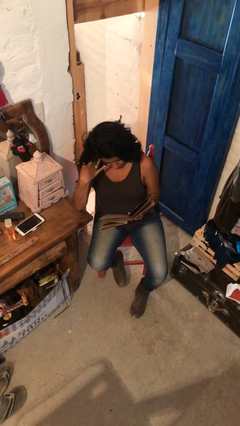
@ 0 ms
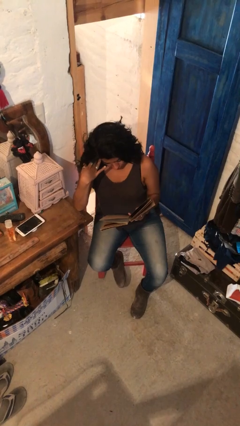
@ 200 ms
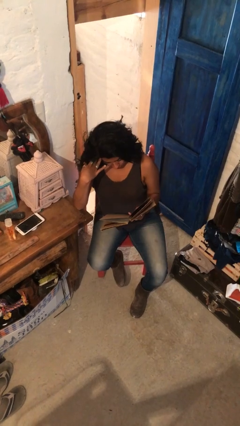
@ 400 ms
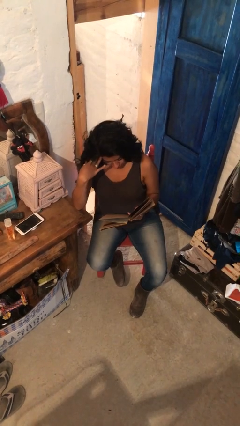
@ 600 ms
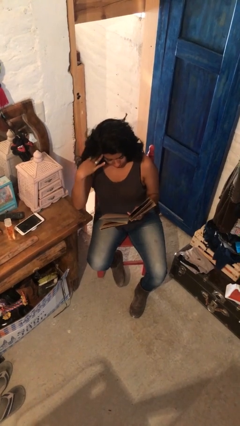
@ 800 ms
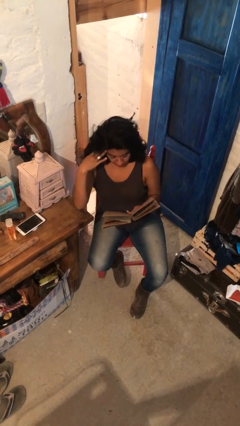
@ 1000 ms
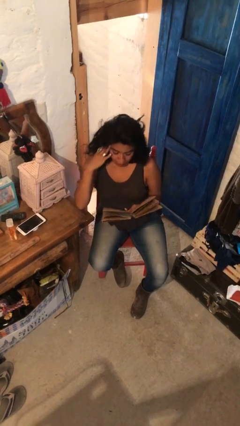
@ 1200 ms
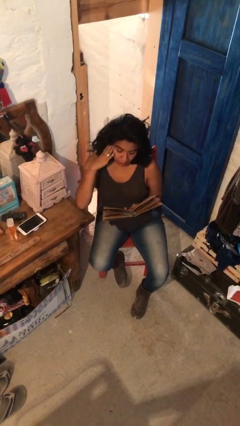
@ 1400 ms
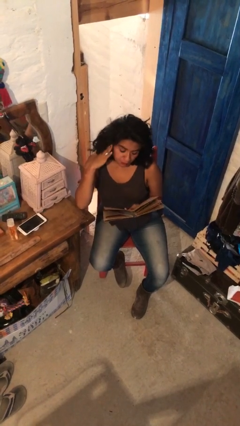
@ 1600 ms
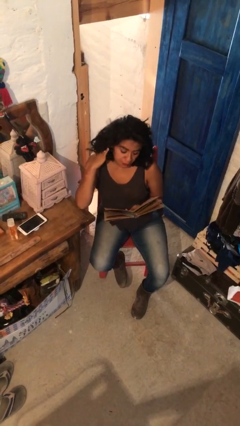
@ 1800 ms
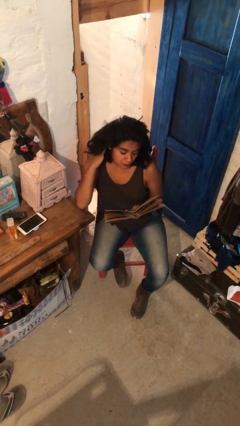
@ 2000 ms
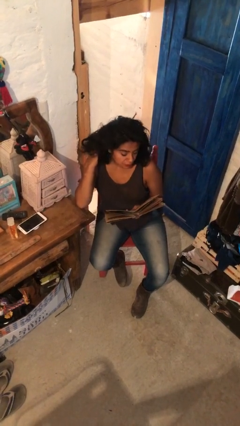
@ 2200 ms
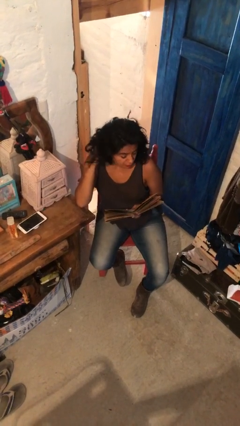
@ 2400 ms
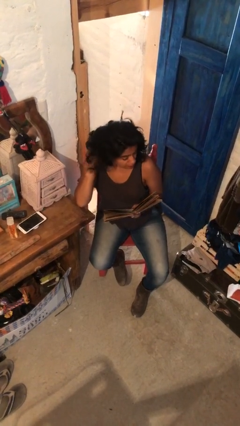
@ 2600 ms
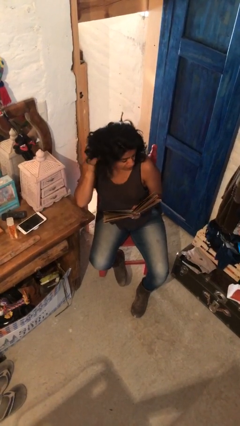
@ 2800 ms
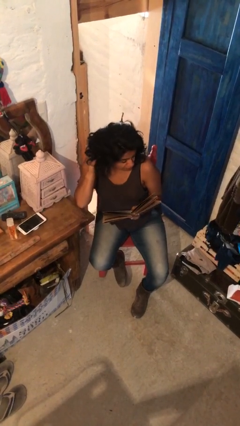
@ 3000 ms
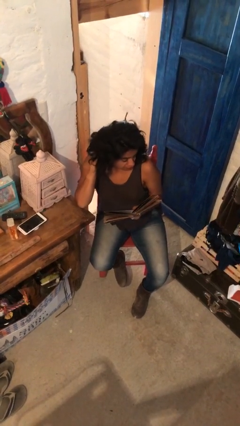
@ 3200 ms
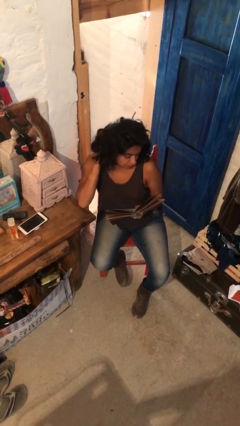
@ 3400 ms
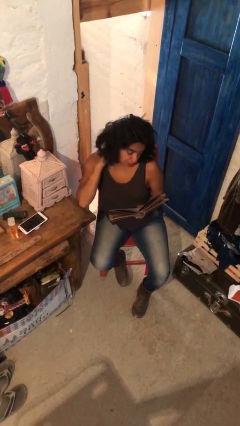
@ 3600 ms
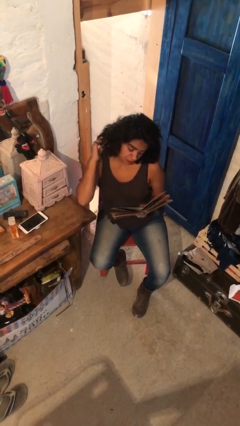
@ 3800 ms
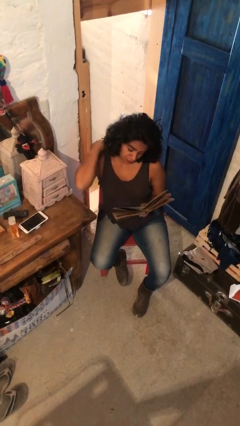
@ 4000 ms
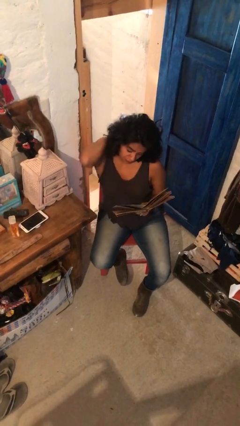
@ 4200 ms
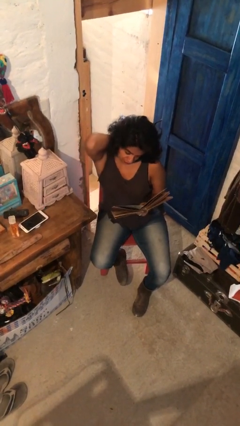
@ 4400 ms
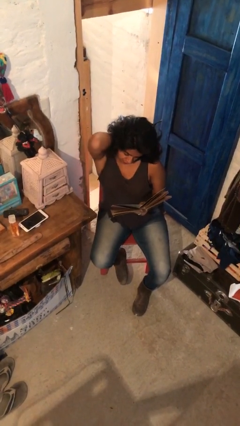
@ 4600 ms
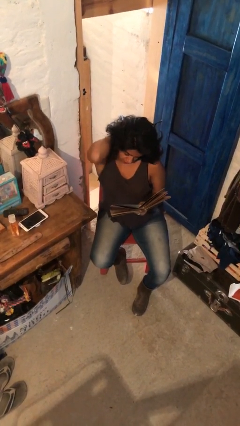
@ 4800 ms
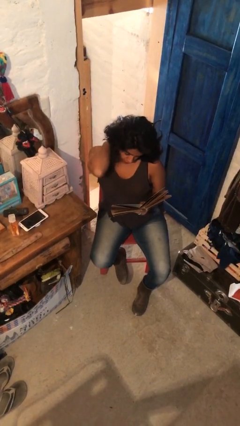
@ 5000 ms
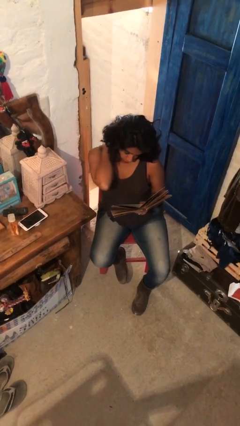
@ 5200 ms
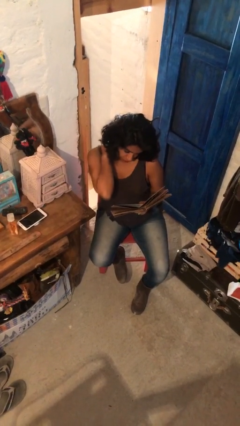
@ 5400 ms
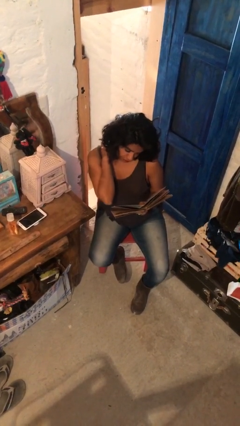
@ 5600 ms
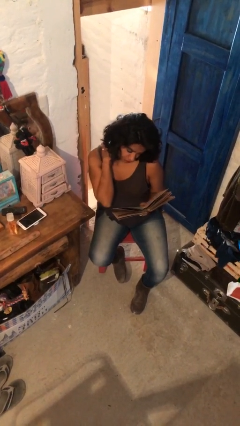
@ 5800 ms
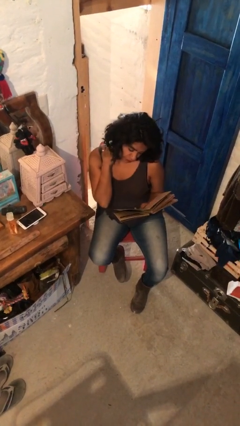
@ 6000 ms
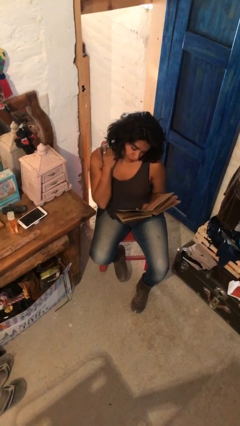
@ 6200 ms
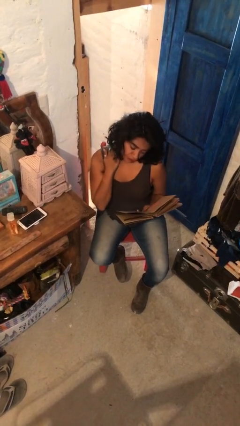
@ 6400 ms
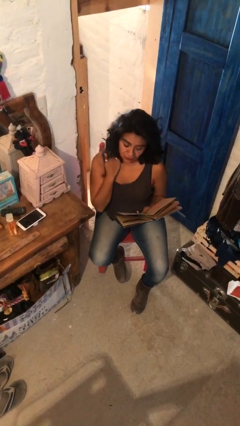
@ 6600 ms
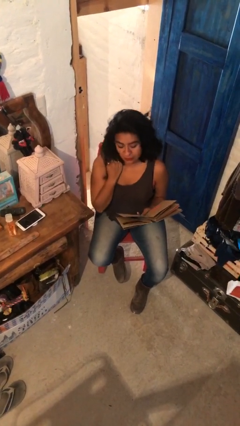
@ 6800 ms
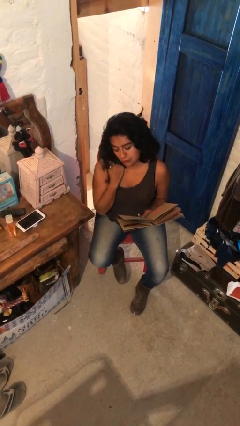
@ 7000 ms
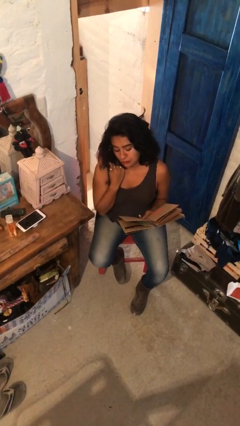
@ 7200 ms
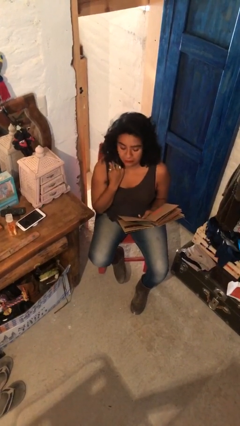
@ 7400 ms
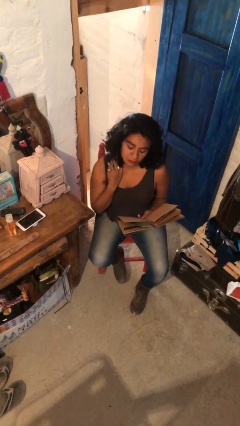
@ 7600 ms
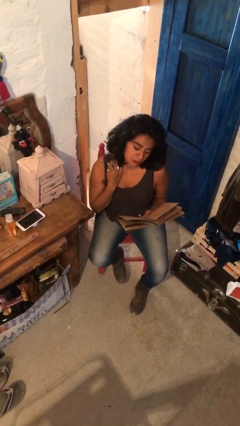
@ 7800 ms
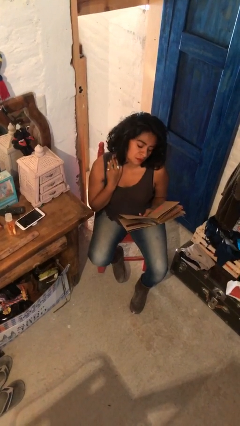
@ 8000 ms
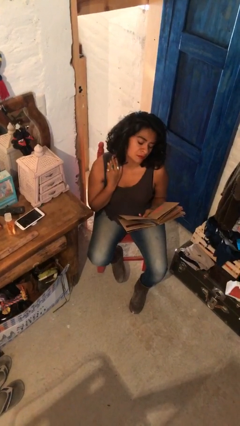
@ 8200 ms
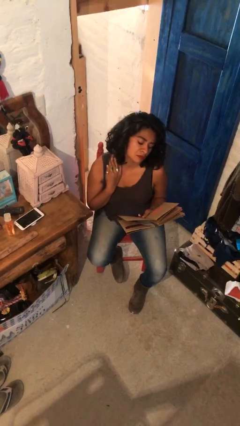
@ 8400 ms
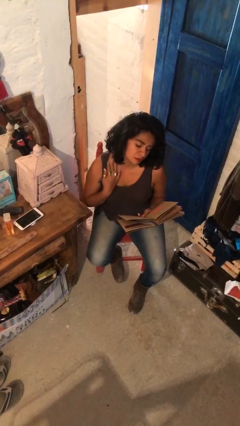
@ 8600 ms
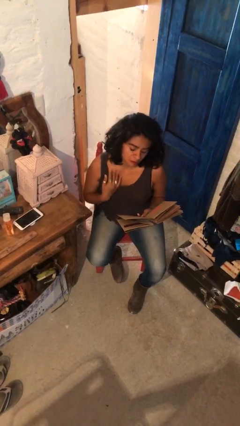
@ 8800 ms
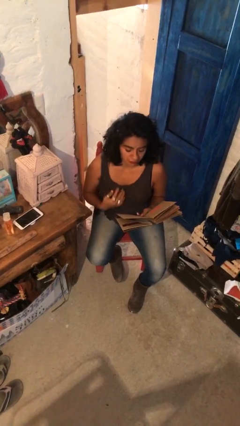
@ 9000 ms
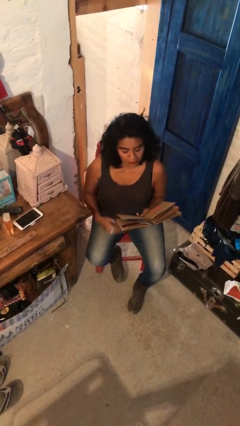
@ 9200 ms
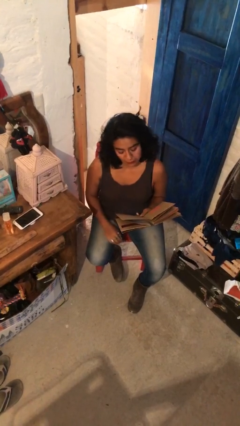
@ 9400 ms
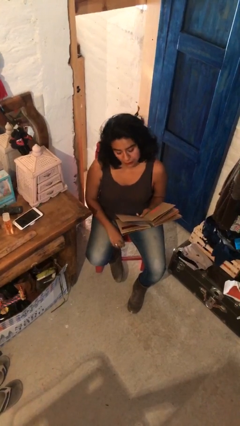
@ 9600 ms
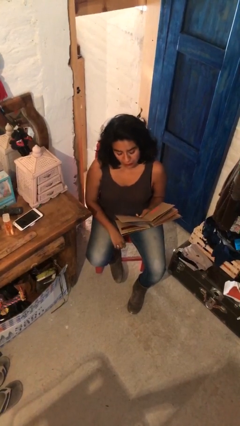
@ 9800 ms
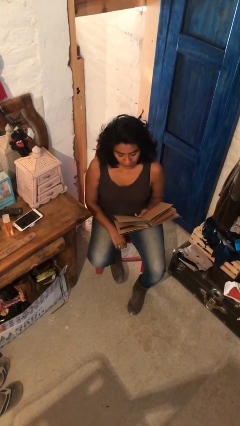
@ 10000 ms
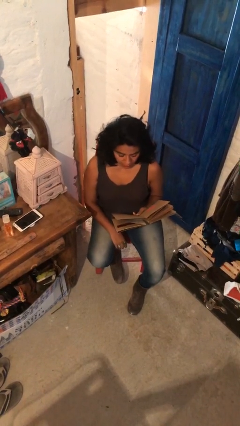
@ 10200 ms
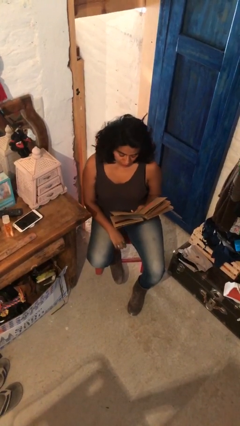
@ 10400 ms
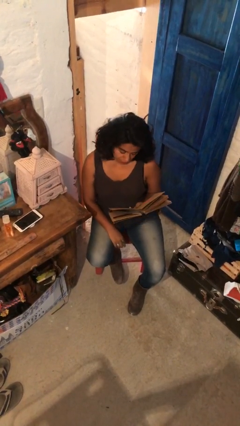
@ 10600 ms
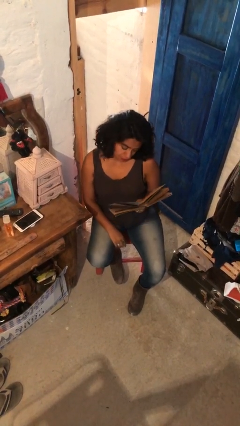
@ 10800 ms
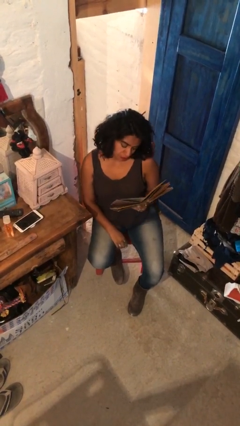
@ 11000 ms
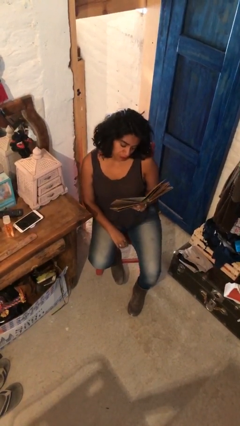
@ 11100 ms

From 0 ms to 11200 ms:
person reads document

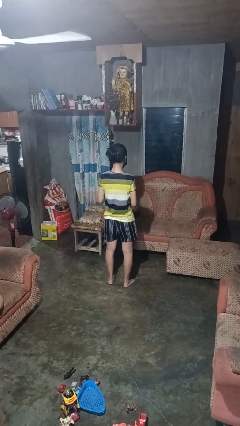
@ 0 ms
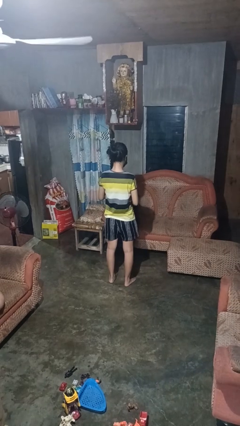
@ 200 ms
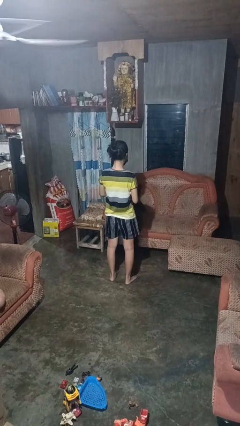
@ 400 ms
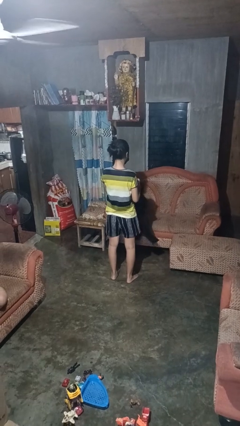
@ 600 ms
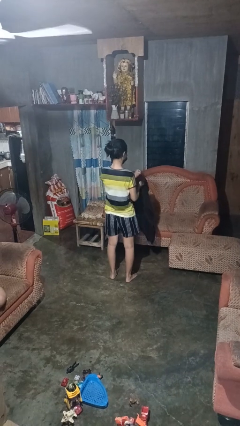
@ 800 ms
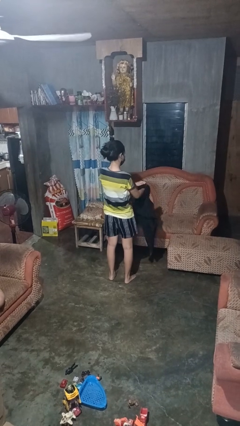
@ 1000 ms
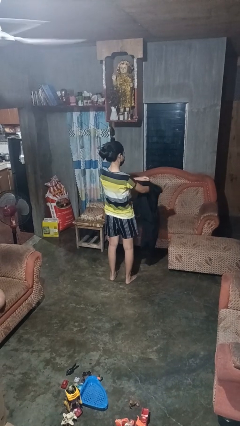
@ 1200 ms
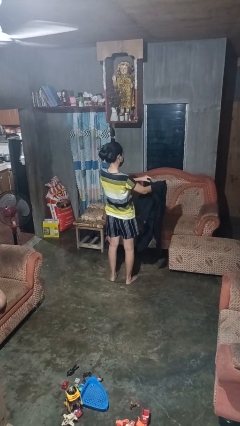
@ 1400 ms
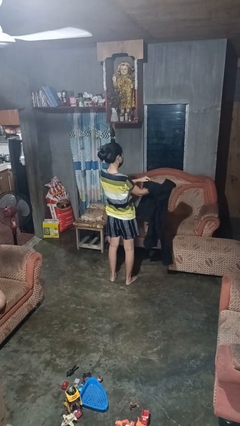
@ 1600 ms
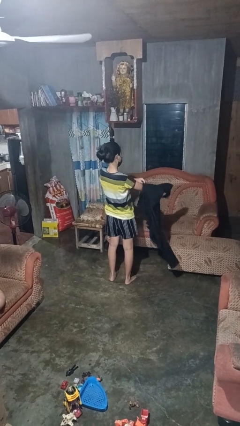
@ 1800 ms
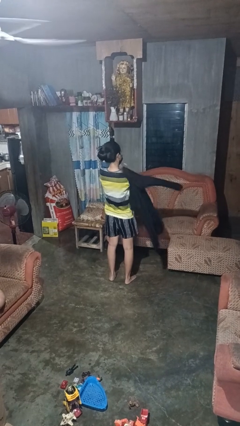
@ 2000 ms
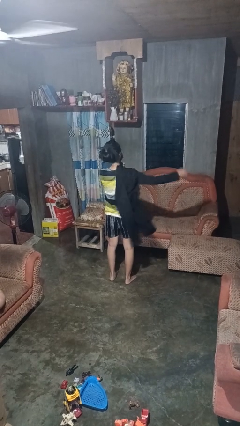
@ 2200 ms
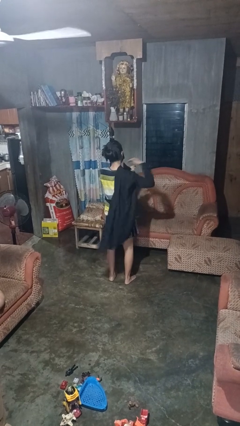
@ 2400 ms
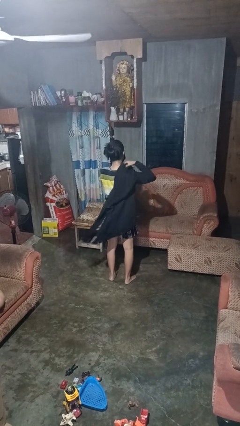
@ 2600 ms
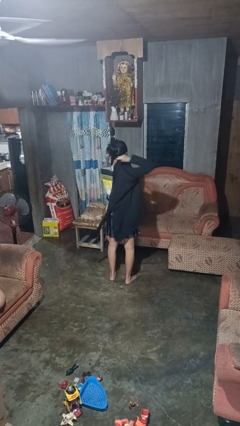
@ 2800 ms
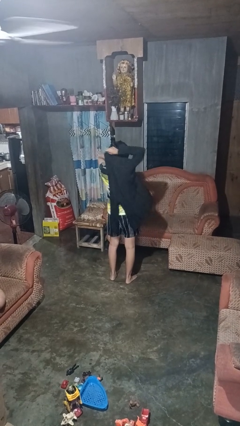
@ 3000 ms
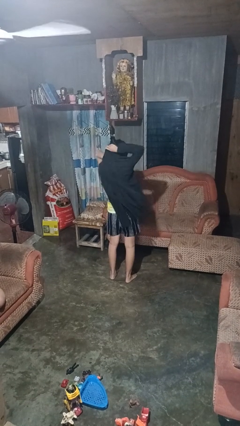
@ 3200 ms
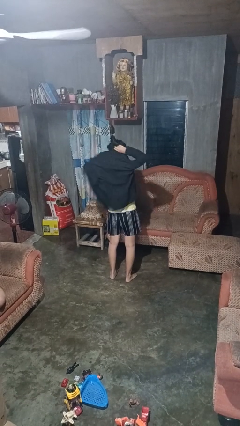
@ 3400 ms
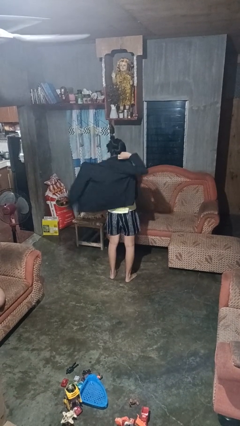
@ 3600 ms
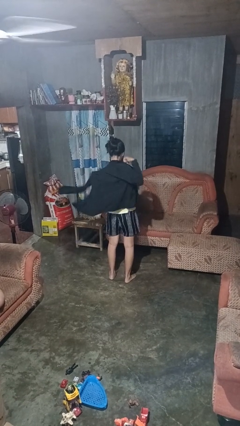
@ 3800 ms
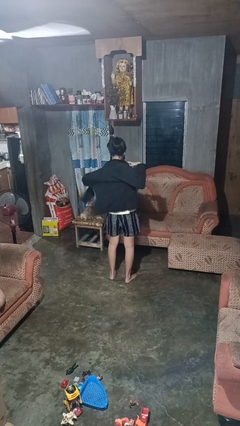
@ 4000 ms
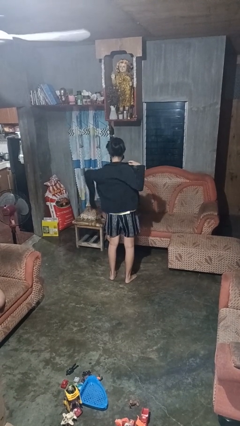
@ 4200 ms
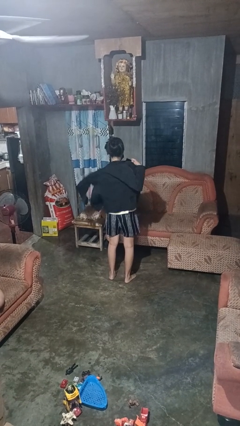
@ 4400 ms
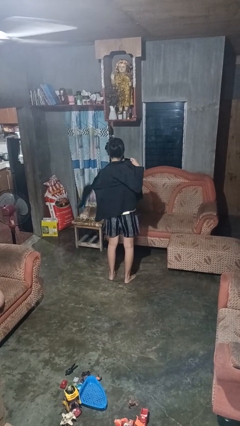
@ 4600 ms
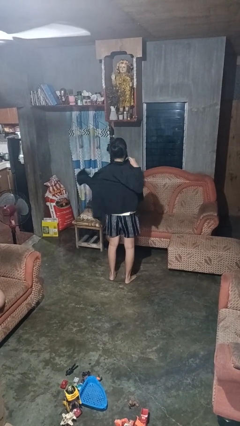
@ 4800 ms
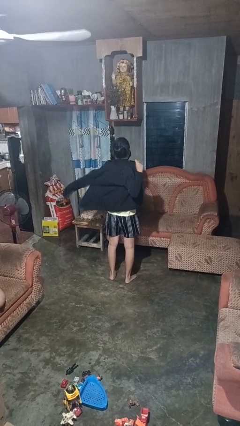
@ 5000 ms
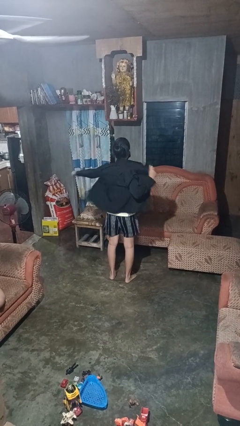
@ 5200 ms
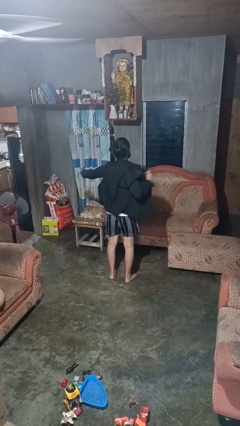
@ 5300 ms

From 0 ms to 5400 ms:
person puts on shirt

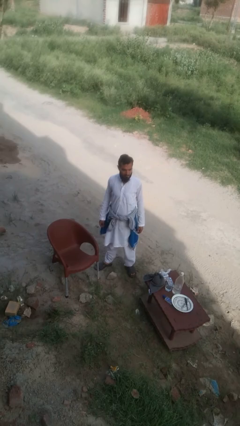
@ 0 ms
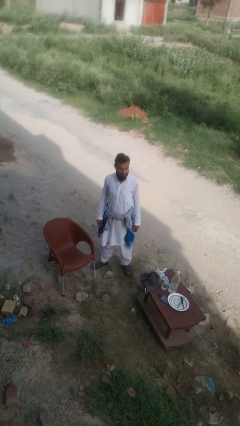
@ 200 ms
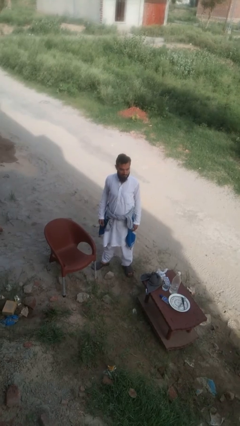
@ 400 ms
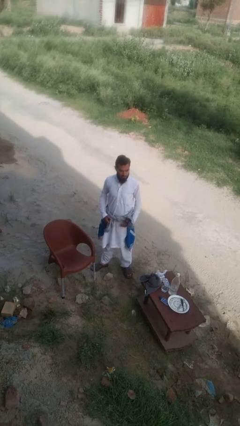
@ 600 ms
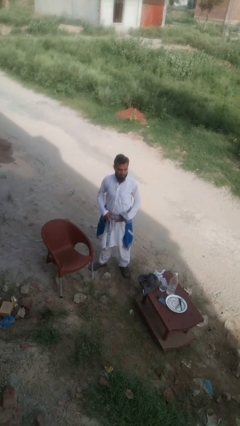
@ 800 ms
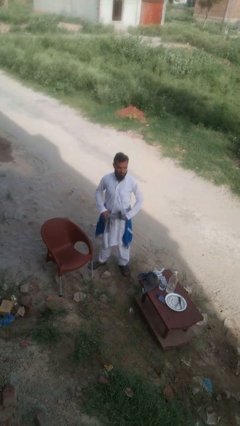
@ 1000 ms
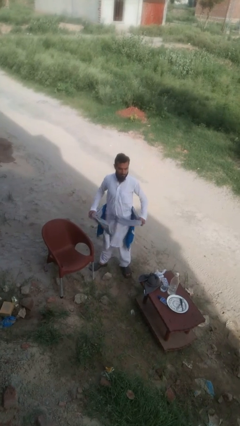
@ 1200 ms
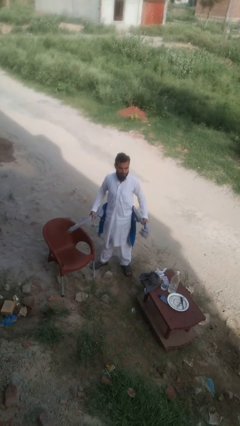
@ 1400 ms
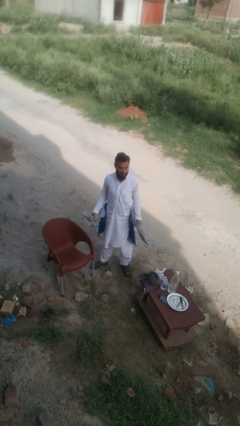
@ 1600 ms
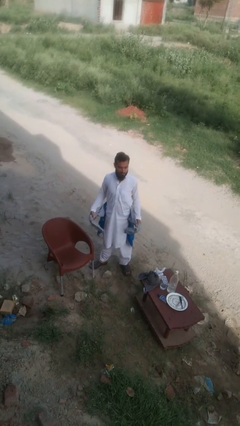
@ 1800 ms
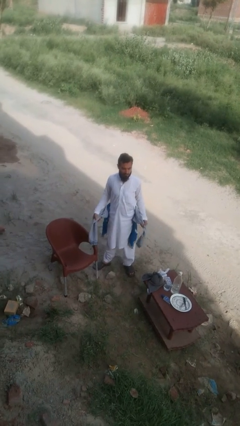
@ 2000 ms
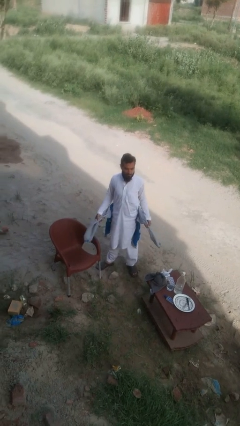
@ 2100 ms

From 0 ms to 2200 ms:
person unties jacket around waist
